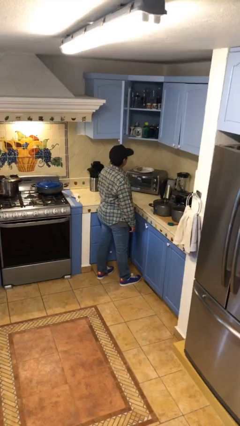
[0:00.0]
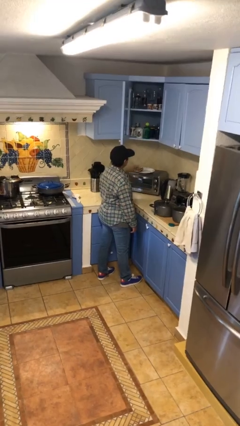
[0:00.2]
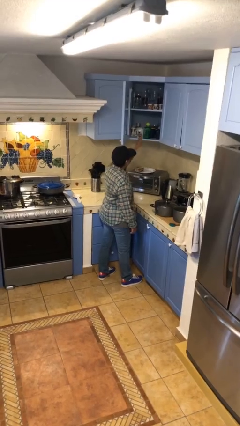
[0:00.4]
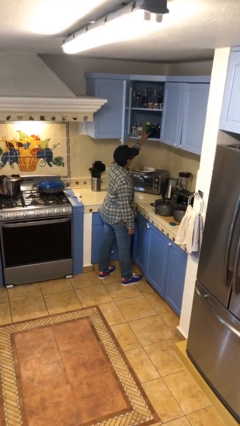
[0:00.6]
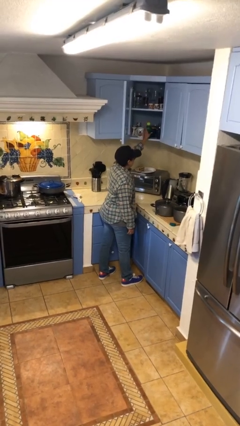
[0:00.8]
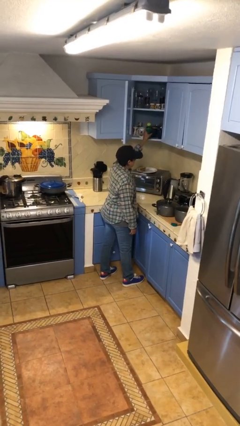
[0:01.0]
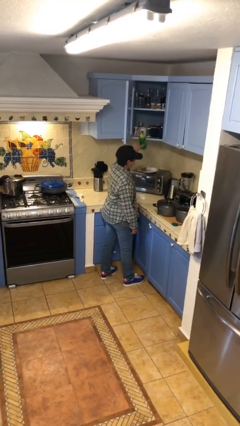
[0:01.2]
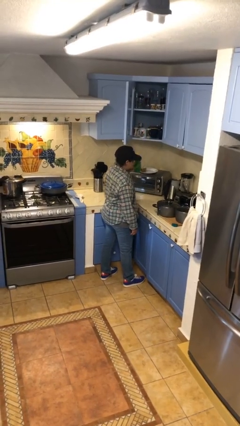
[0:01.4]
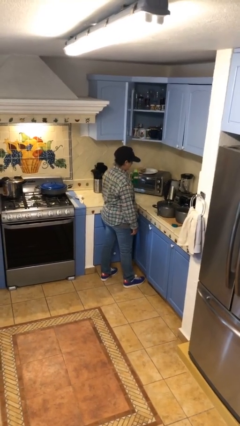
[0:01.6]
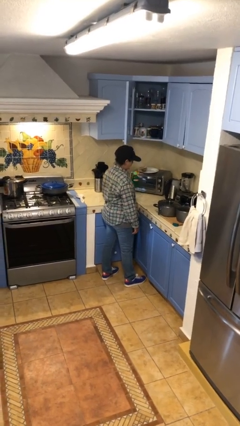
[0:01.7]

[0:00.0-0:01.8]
person picks up object from cabinet

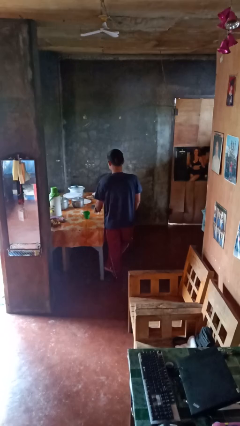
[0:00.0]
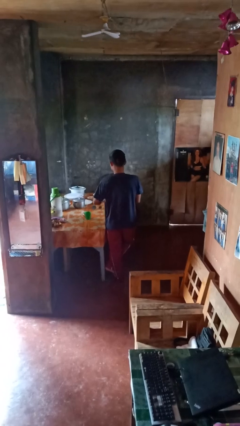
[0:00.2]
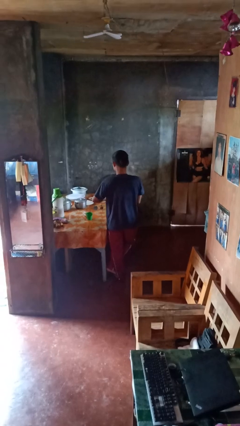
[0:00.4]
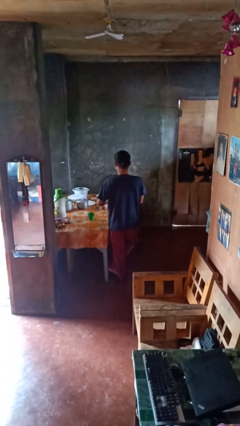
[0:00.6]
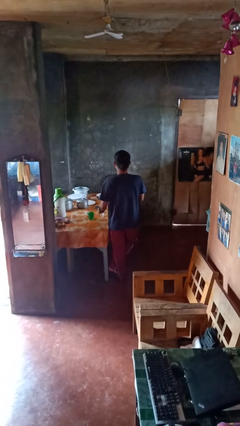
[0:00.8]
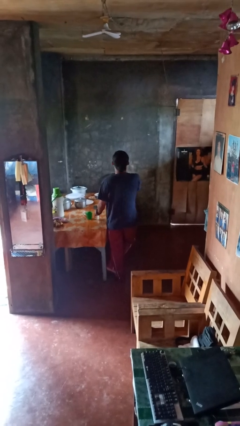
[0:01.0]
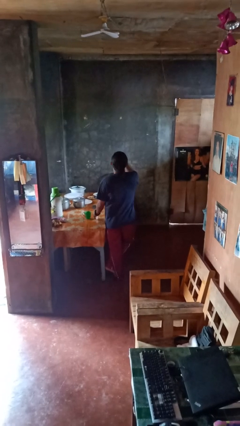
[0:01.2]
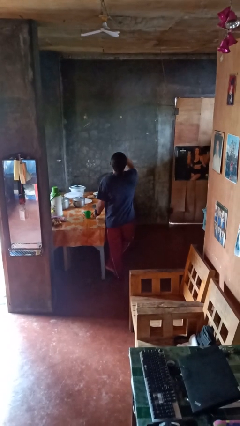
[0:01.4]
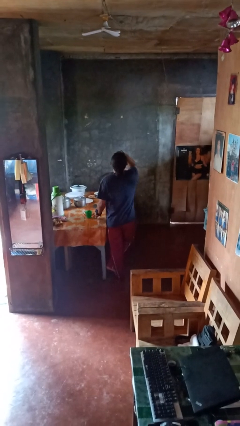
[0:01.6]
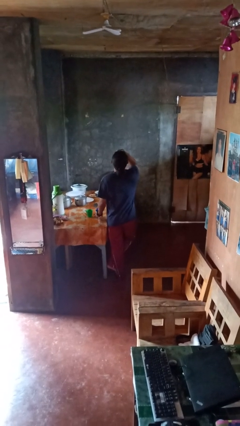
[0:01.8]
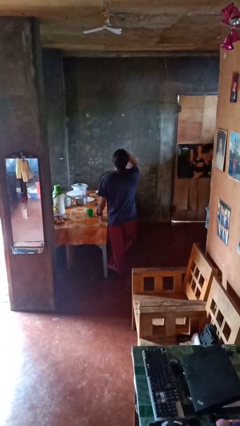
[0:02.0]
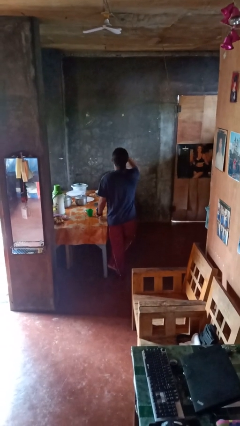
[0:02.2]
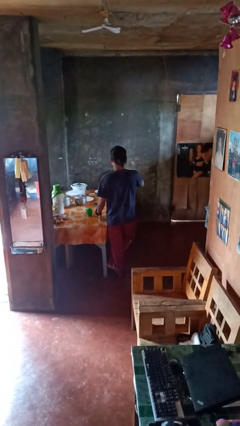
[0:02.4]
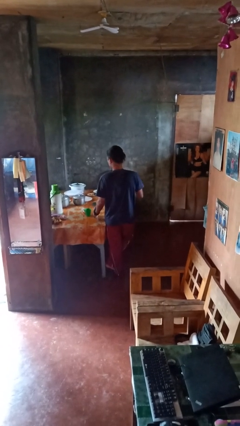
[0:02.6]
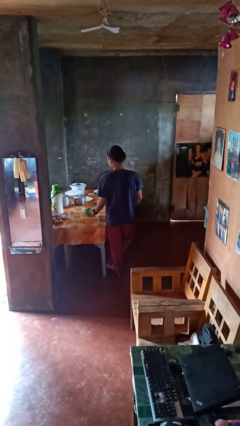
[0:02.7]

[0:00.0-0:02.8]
person takes medicine pills

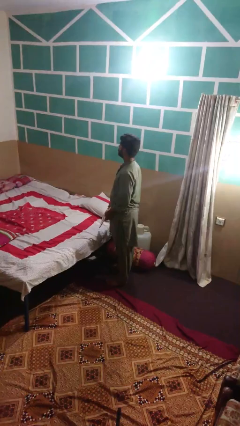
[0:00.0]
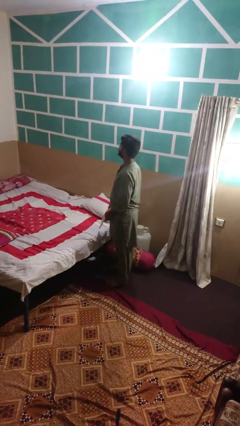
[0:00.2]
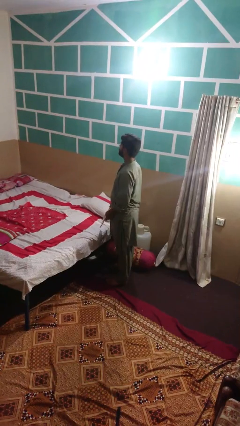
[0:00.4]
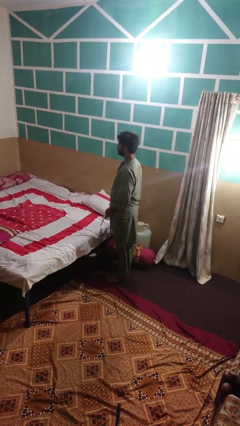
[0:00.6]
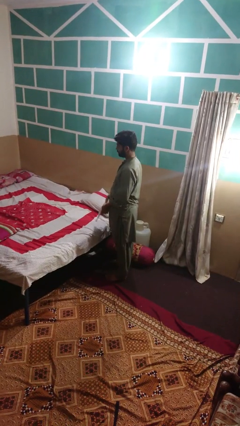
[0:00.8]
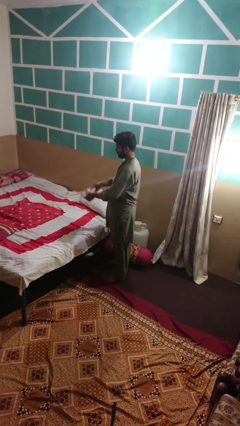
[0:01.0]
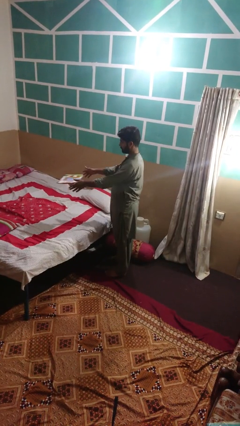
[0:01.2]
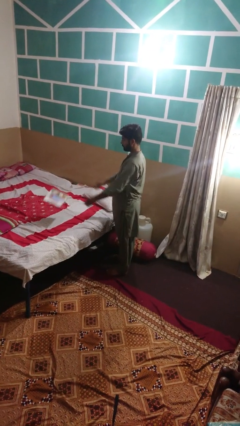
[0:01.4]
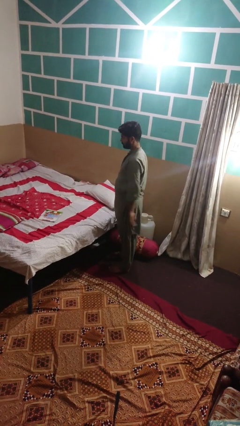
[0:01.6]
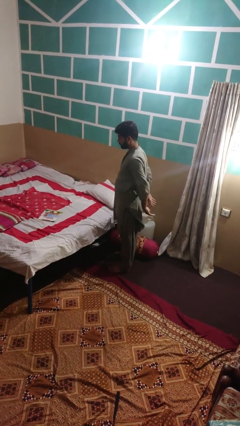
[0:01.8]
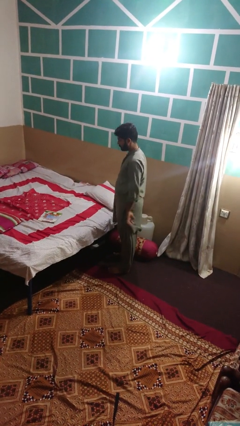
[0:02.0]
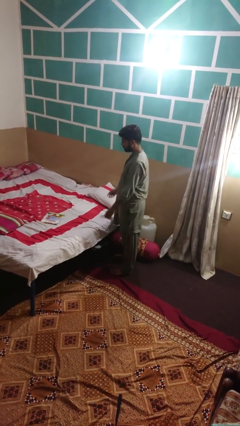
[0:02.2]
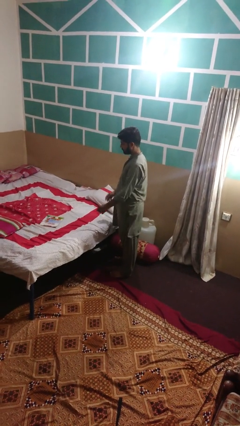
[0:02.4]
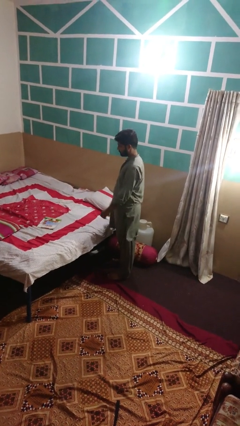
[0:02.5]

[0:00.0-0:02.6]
person throws object on bed

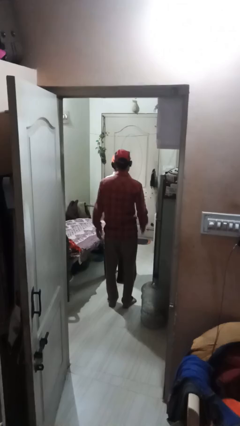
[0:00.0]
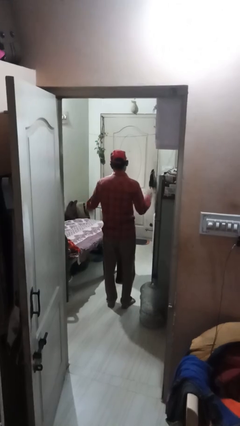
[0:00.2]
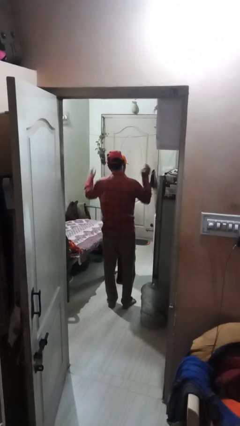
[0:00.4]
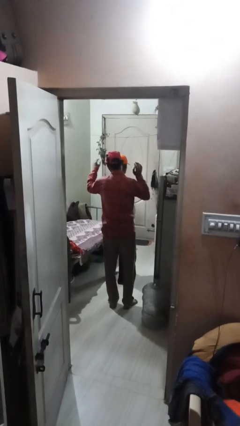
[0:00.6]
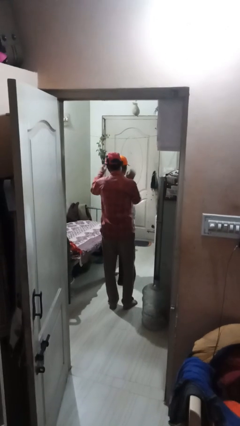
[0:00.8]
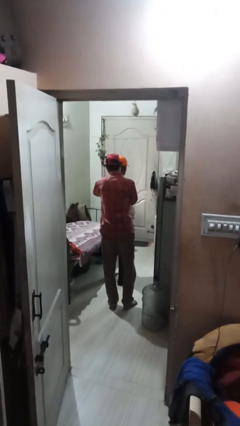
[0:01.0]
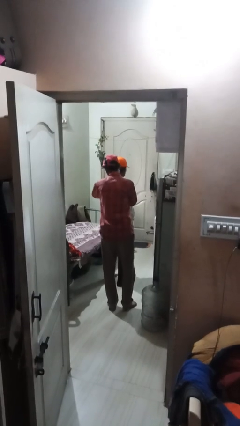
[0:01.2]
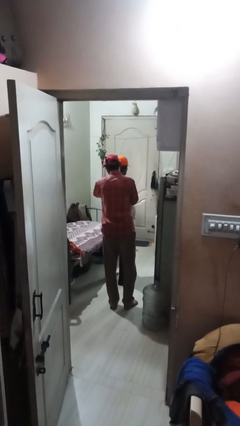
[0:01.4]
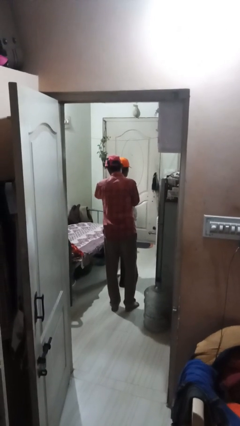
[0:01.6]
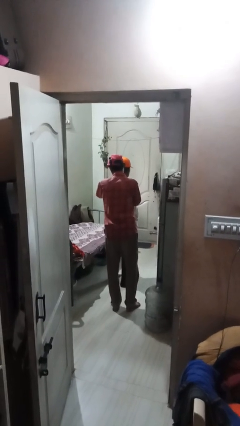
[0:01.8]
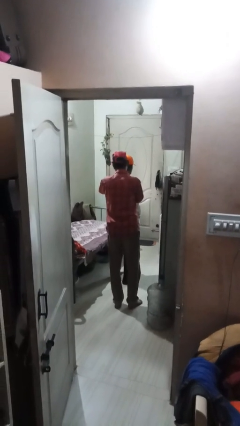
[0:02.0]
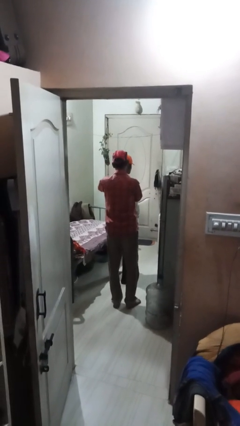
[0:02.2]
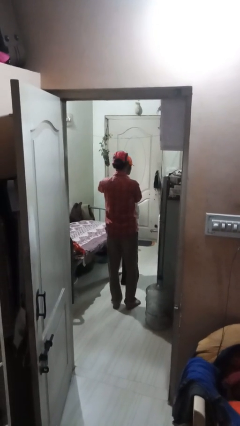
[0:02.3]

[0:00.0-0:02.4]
person touches back of person

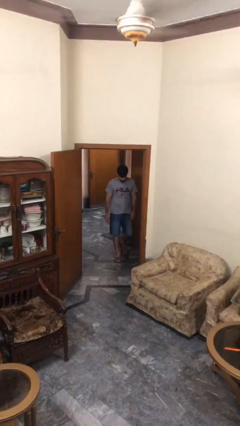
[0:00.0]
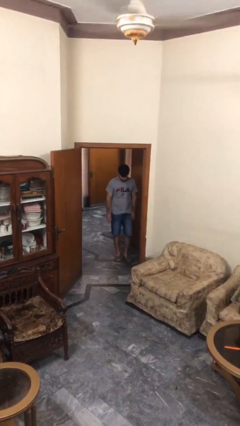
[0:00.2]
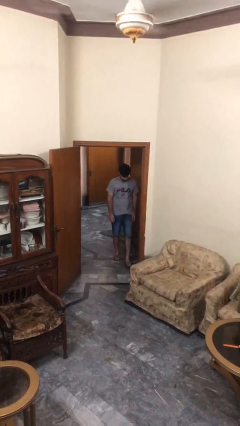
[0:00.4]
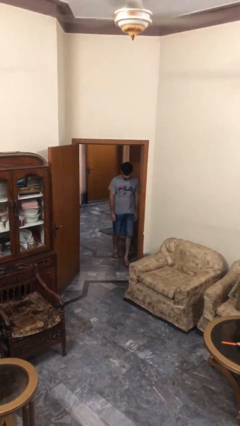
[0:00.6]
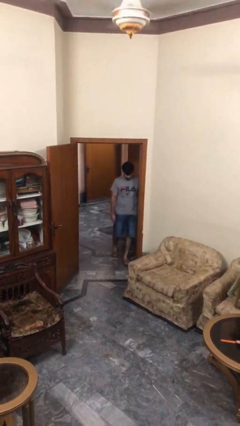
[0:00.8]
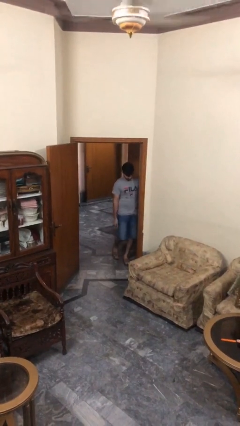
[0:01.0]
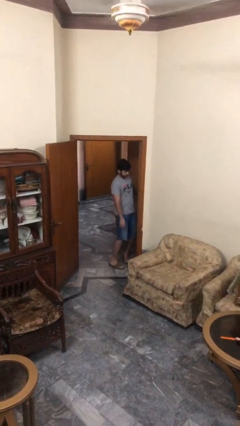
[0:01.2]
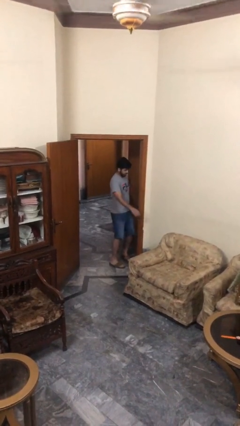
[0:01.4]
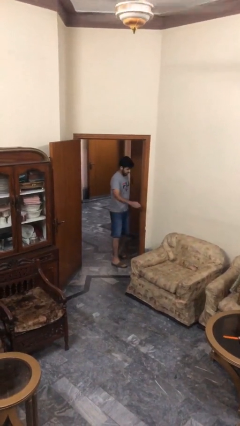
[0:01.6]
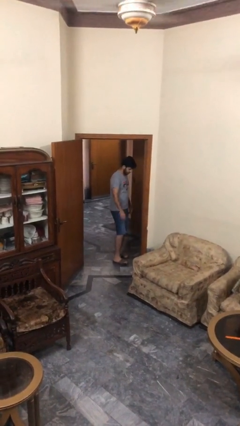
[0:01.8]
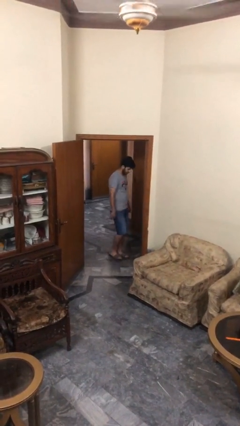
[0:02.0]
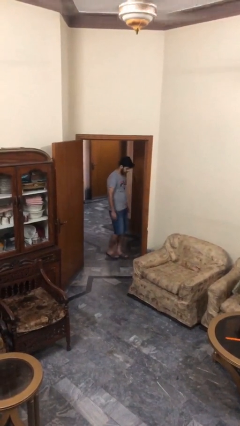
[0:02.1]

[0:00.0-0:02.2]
person bumps into wall

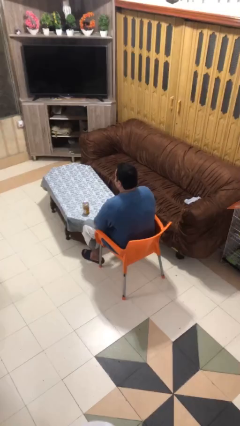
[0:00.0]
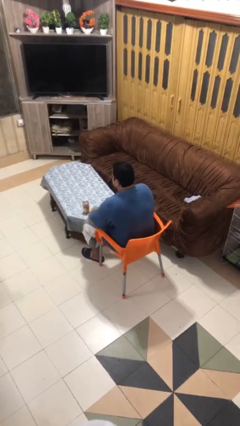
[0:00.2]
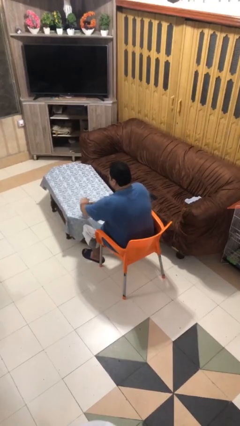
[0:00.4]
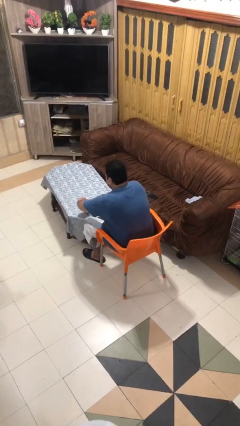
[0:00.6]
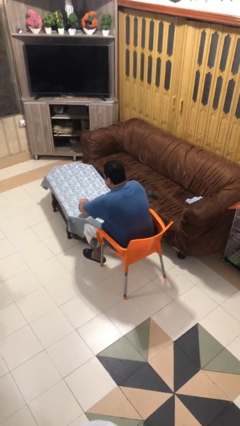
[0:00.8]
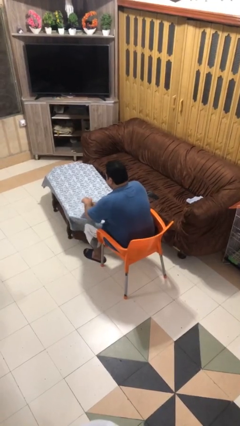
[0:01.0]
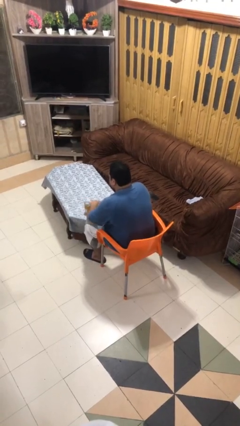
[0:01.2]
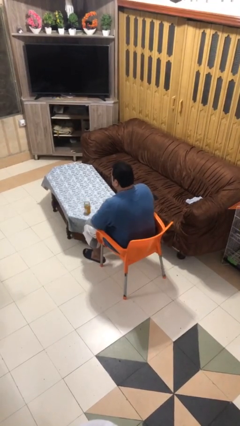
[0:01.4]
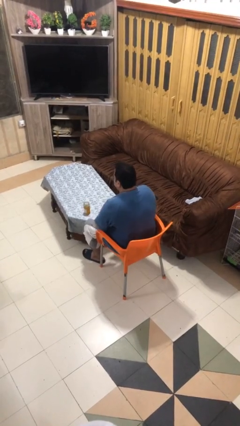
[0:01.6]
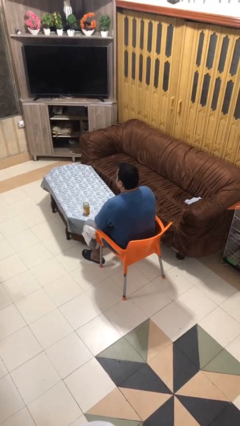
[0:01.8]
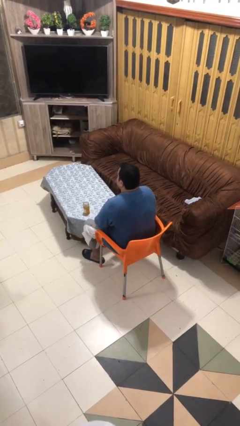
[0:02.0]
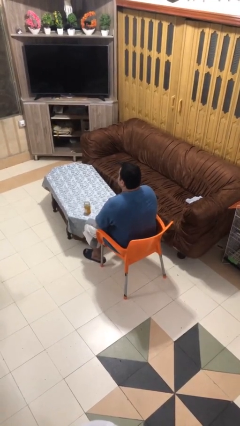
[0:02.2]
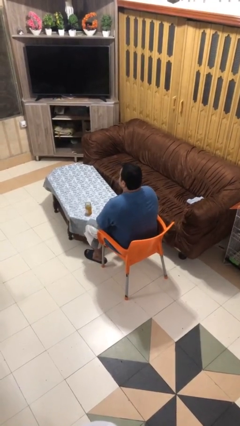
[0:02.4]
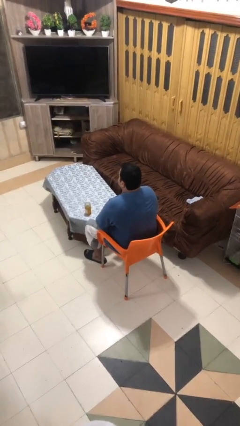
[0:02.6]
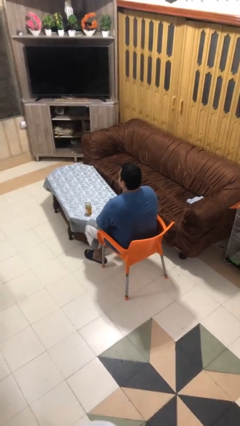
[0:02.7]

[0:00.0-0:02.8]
person opens jar

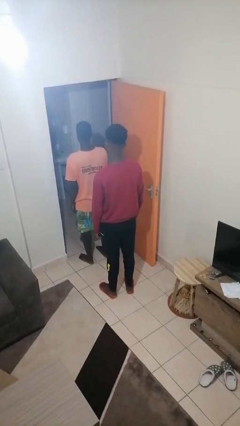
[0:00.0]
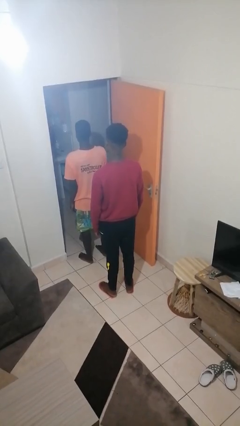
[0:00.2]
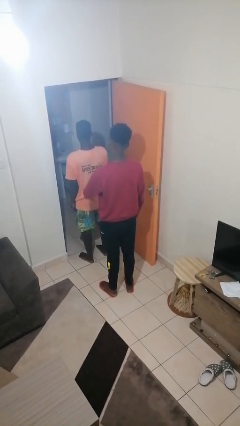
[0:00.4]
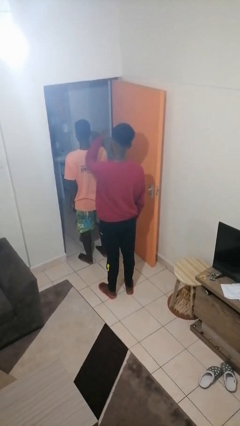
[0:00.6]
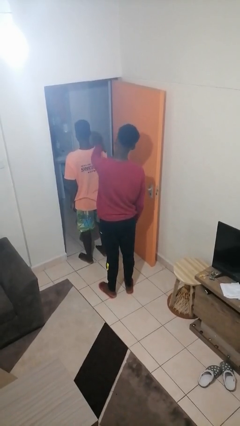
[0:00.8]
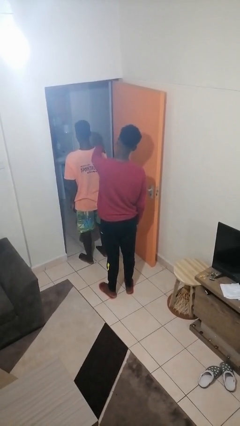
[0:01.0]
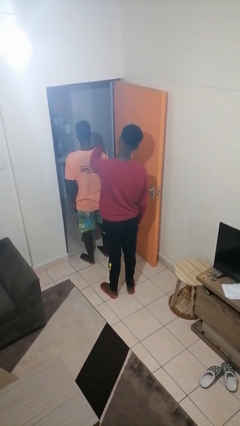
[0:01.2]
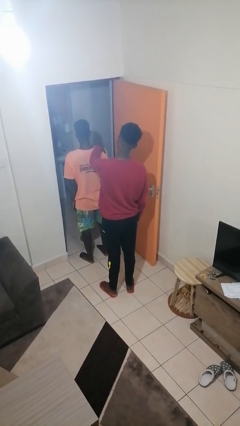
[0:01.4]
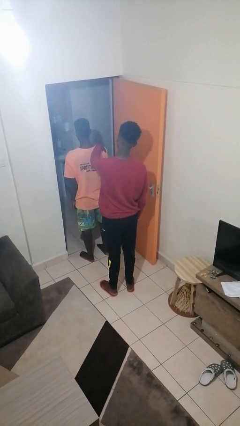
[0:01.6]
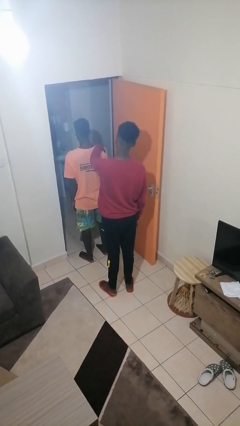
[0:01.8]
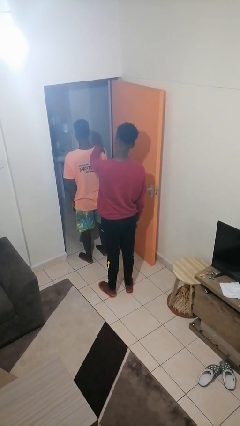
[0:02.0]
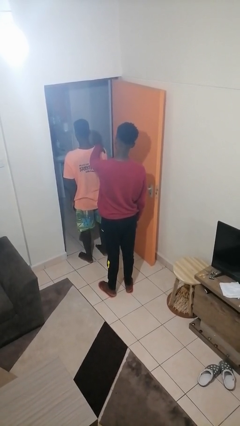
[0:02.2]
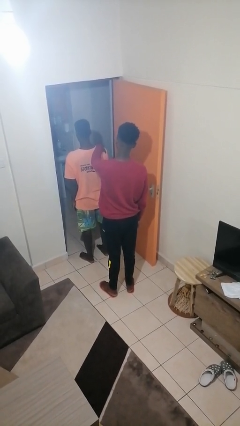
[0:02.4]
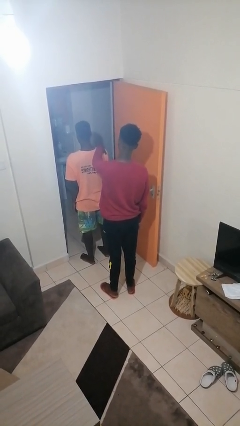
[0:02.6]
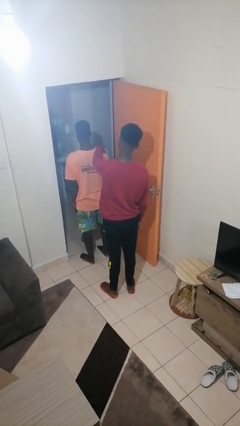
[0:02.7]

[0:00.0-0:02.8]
person grabs person by shoulder
